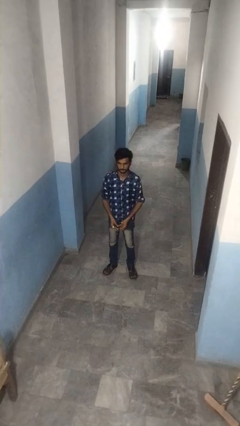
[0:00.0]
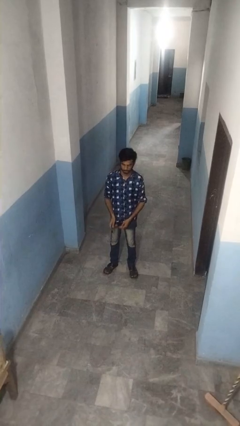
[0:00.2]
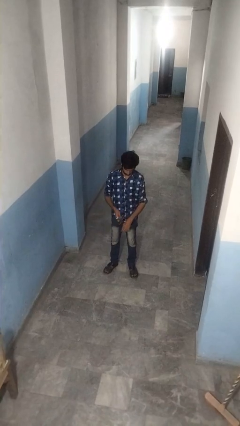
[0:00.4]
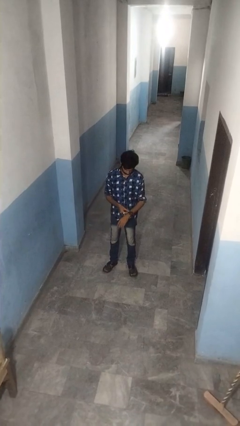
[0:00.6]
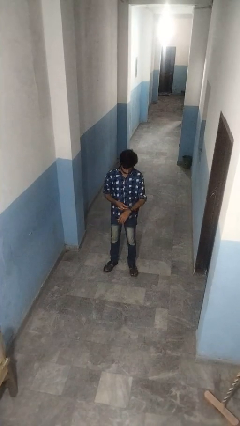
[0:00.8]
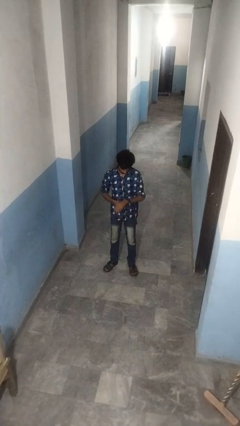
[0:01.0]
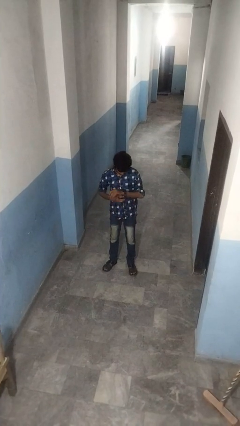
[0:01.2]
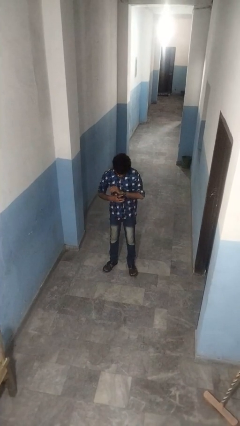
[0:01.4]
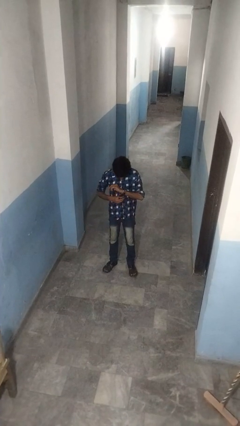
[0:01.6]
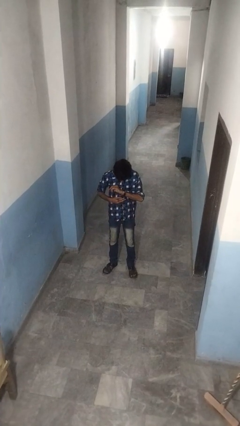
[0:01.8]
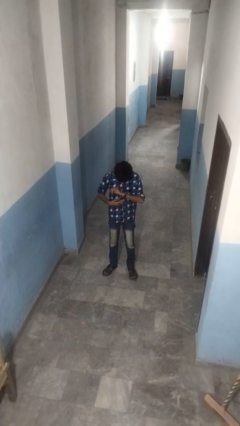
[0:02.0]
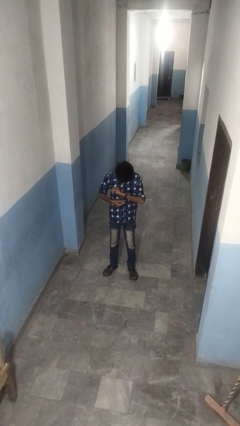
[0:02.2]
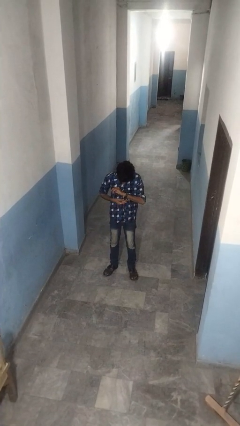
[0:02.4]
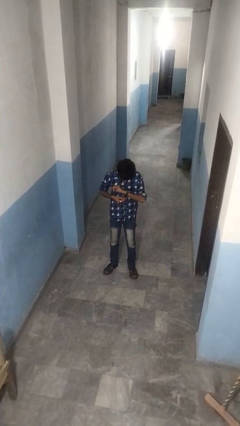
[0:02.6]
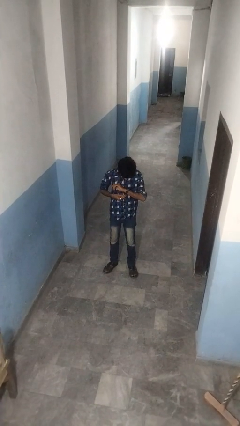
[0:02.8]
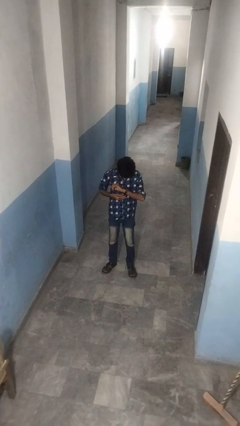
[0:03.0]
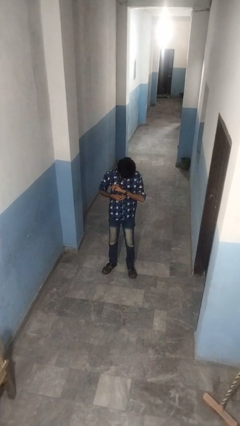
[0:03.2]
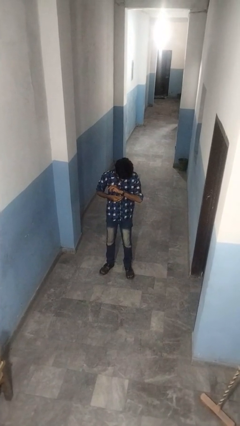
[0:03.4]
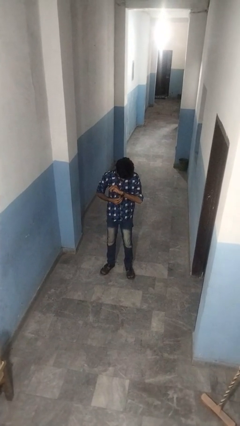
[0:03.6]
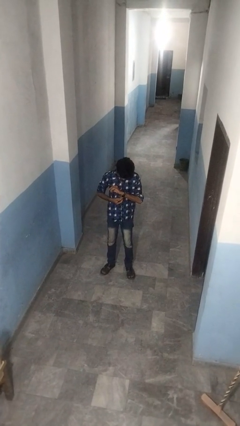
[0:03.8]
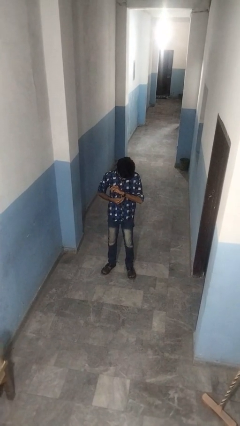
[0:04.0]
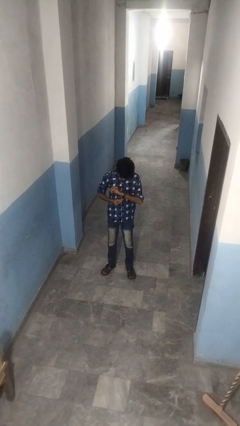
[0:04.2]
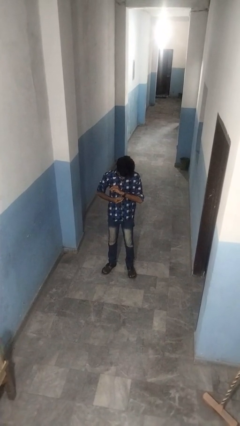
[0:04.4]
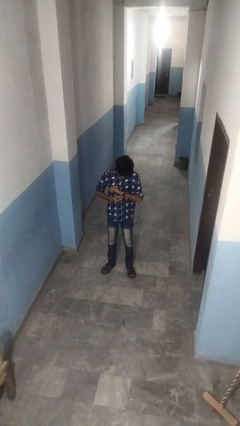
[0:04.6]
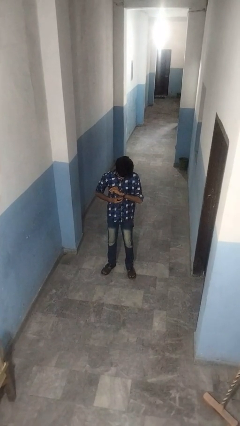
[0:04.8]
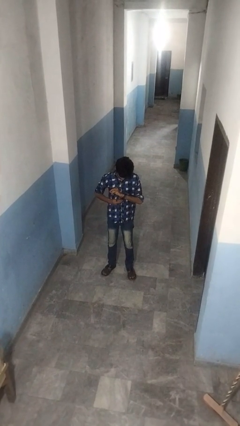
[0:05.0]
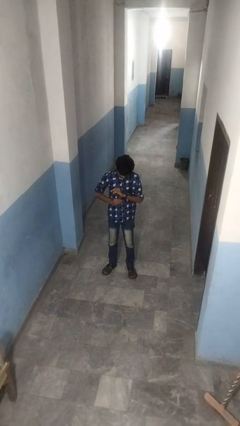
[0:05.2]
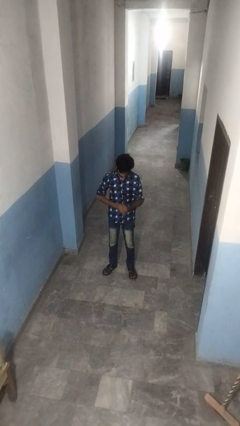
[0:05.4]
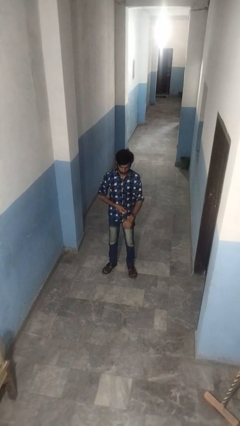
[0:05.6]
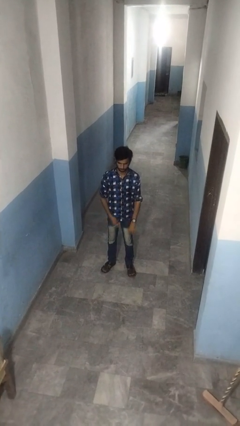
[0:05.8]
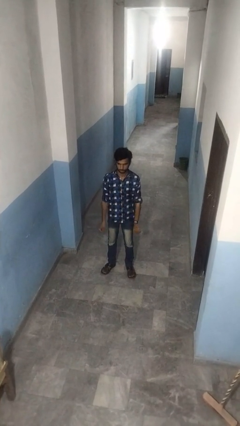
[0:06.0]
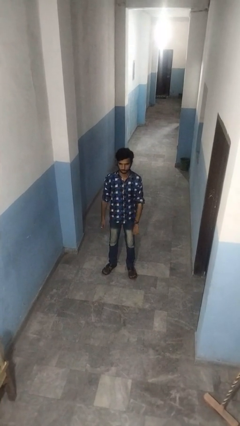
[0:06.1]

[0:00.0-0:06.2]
person puts on wristwatch

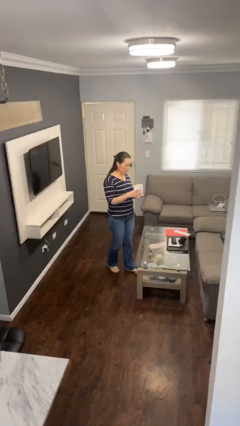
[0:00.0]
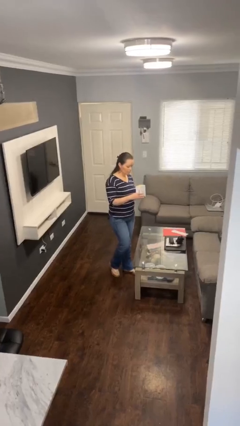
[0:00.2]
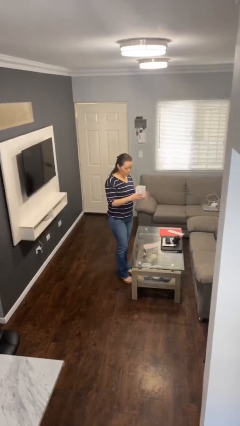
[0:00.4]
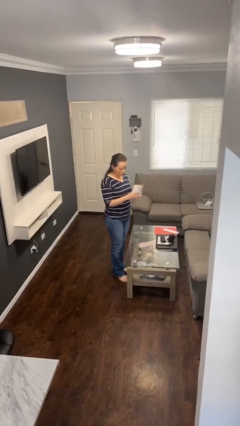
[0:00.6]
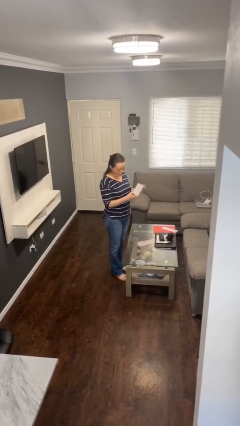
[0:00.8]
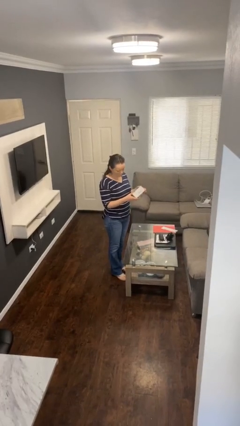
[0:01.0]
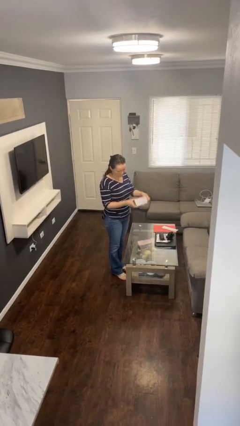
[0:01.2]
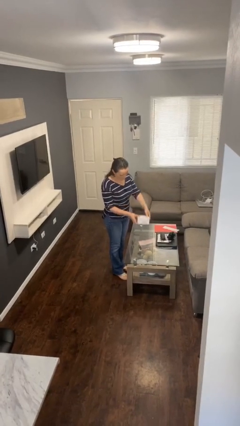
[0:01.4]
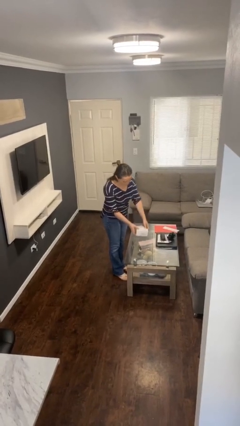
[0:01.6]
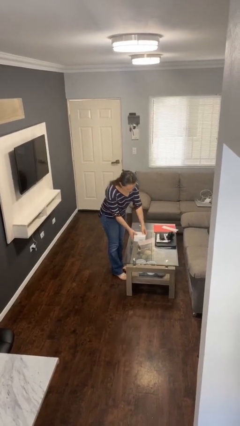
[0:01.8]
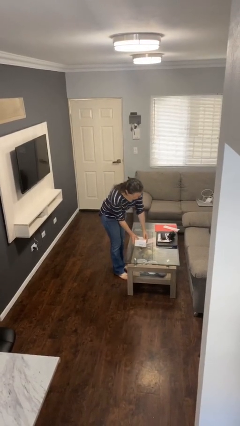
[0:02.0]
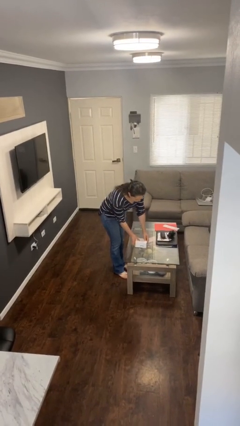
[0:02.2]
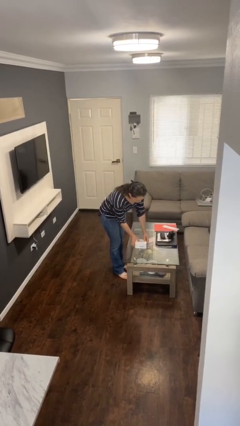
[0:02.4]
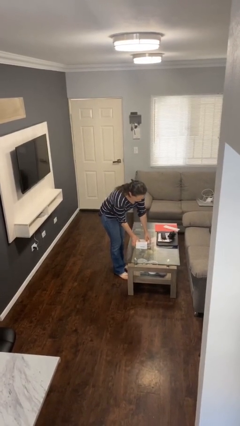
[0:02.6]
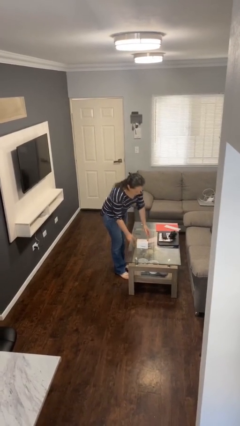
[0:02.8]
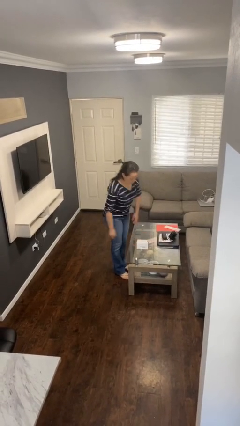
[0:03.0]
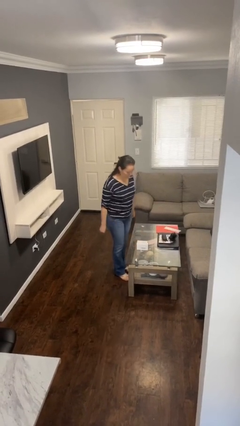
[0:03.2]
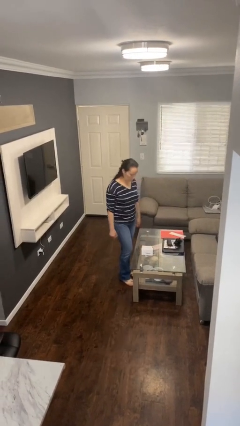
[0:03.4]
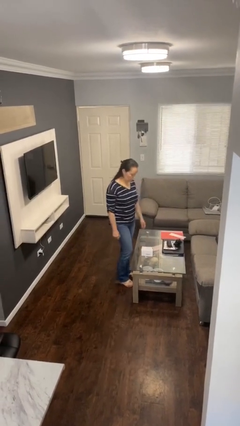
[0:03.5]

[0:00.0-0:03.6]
person puts down object on table

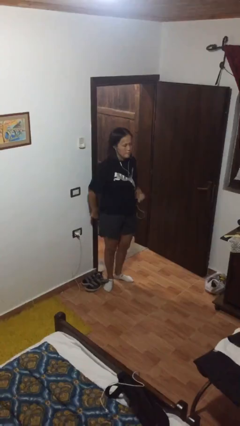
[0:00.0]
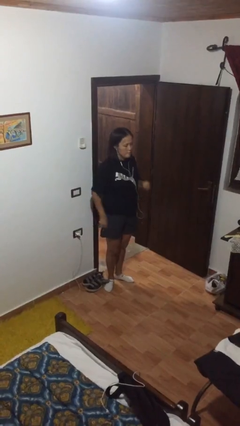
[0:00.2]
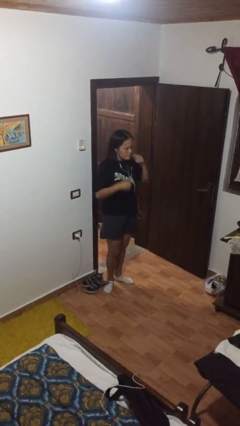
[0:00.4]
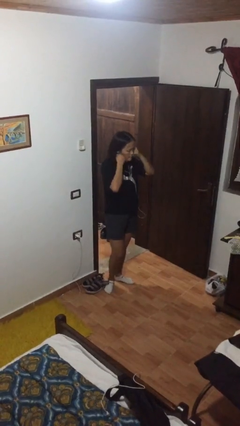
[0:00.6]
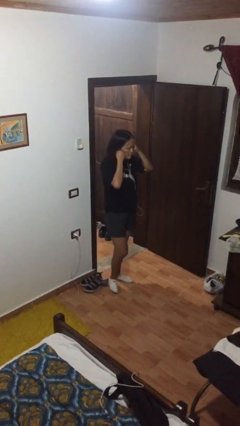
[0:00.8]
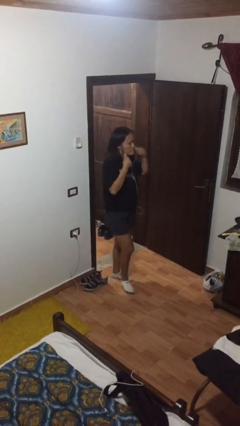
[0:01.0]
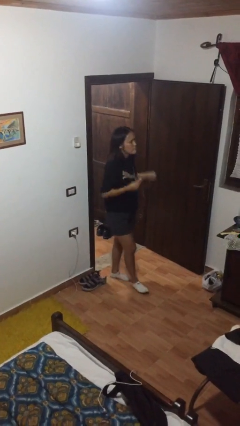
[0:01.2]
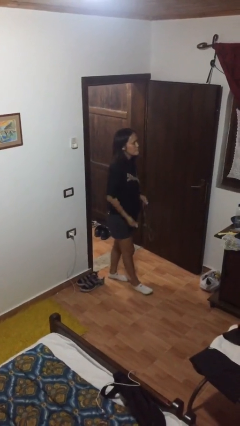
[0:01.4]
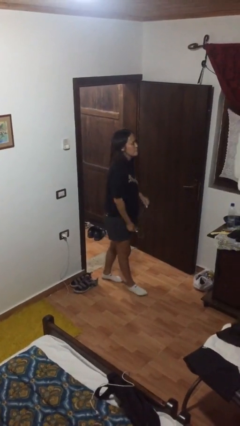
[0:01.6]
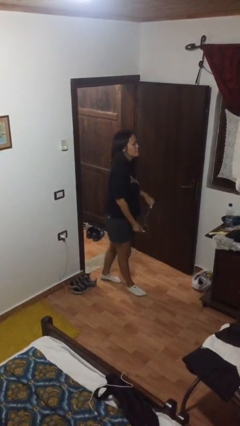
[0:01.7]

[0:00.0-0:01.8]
person takes off headphones

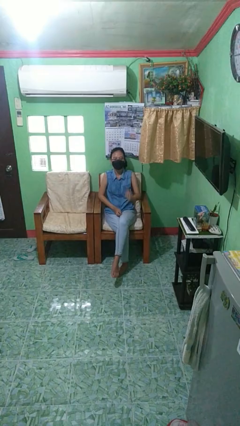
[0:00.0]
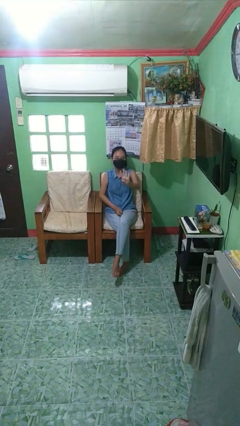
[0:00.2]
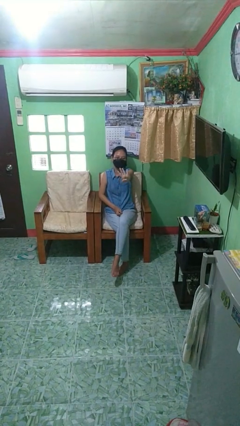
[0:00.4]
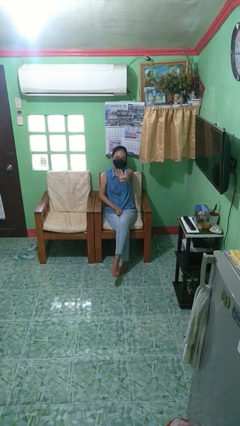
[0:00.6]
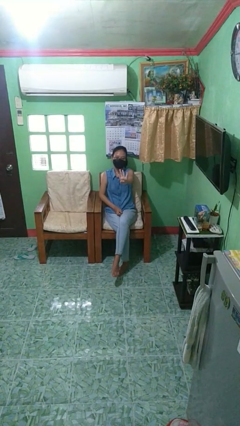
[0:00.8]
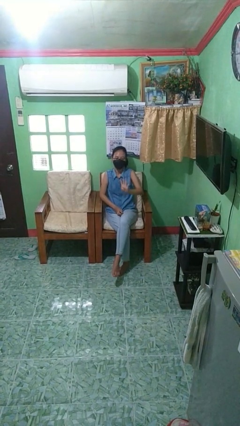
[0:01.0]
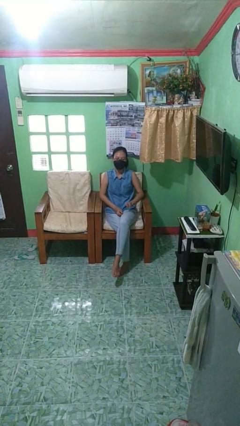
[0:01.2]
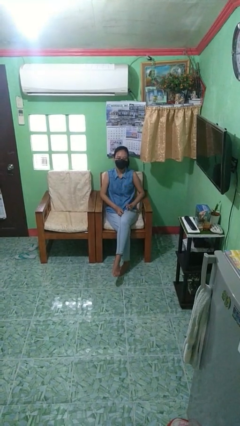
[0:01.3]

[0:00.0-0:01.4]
person gestures number four

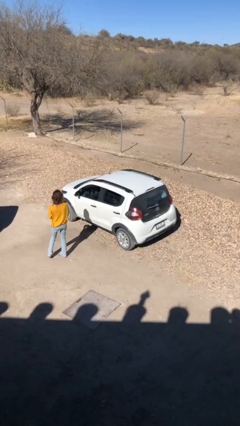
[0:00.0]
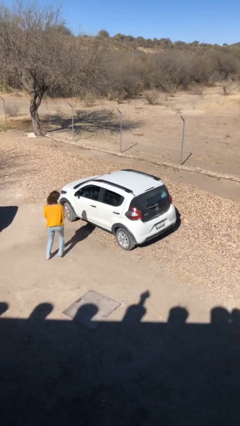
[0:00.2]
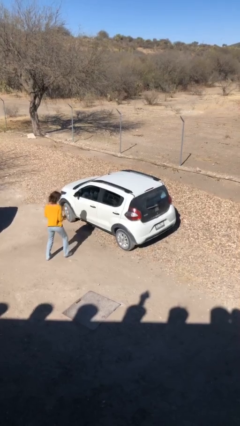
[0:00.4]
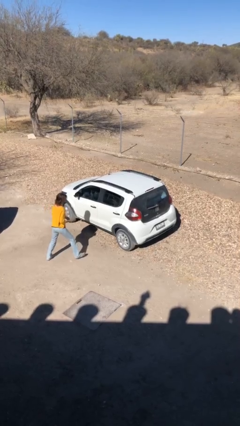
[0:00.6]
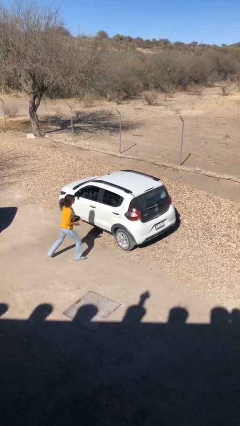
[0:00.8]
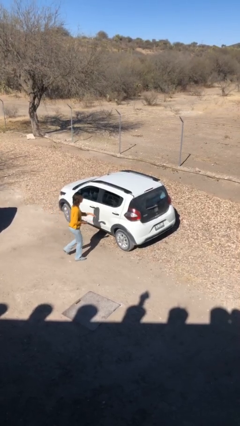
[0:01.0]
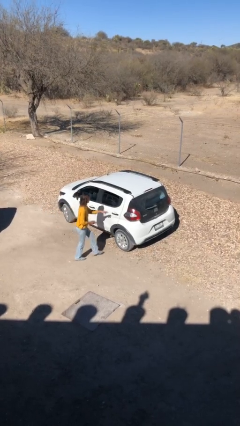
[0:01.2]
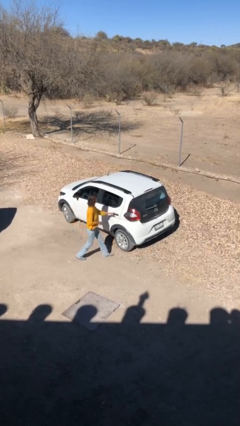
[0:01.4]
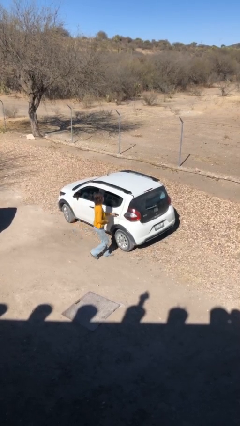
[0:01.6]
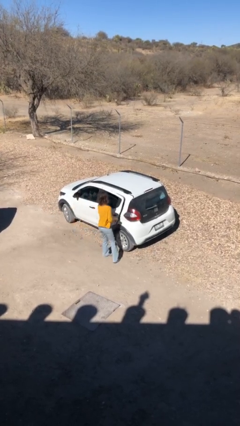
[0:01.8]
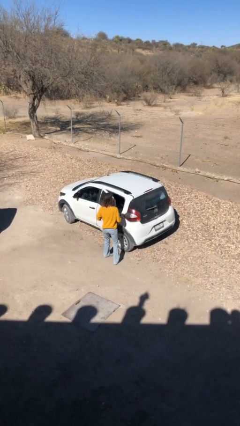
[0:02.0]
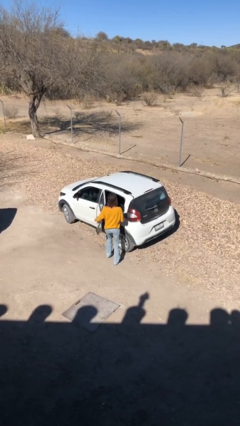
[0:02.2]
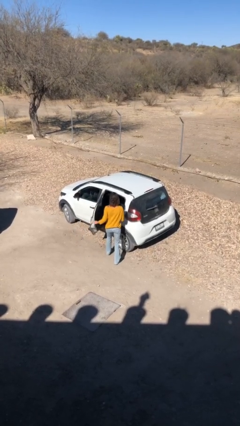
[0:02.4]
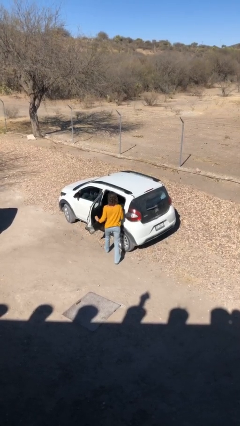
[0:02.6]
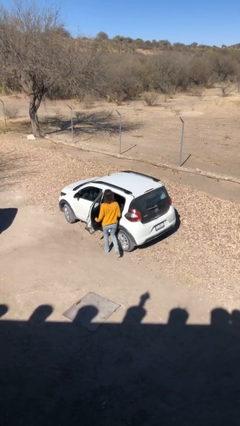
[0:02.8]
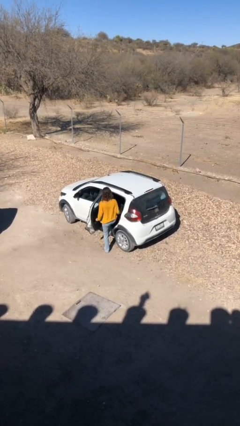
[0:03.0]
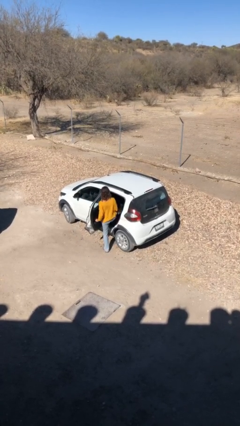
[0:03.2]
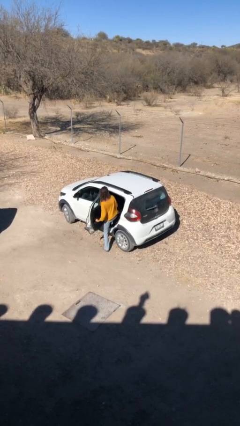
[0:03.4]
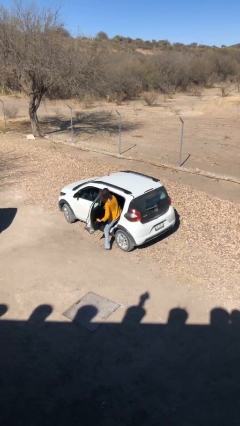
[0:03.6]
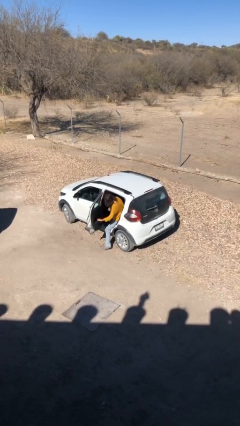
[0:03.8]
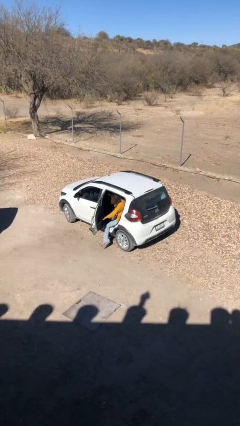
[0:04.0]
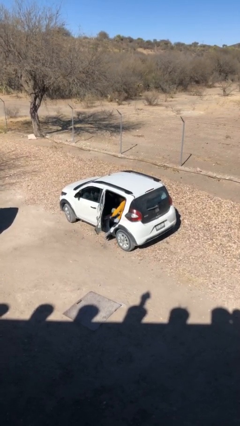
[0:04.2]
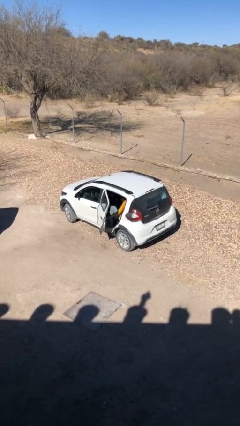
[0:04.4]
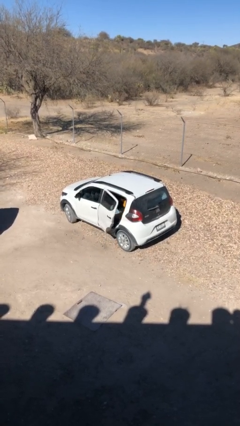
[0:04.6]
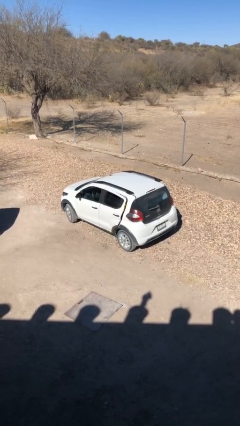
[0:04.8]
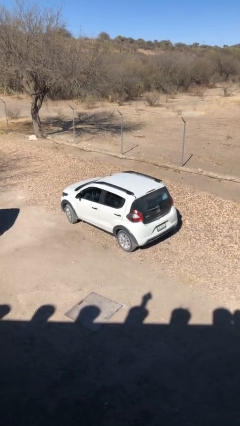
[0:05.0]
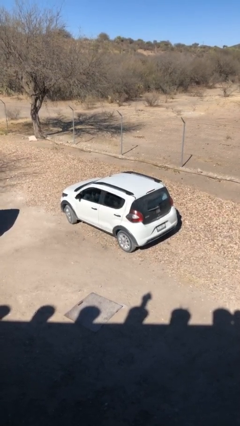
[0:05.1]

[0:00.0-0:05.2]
car picks up person
